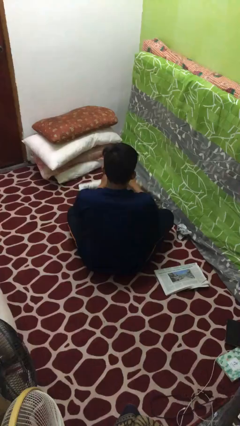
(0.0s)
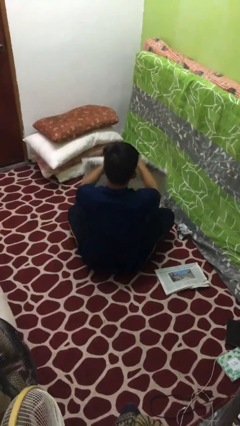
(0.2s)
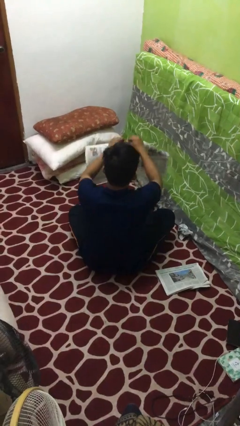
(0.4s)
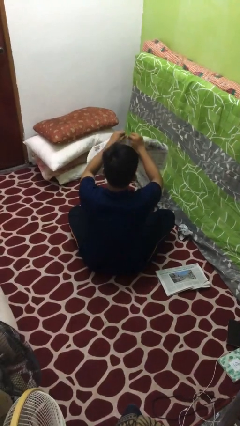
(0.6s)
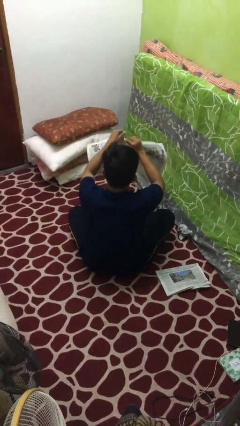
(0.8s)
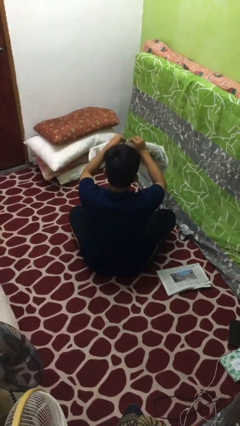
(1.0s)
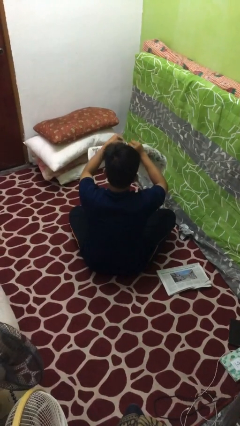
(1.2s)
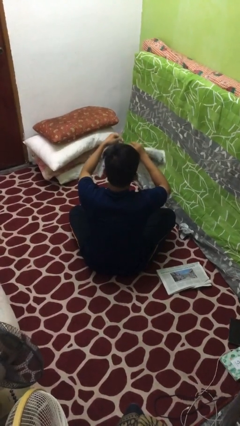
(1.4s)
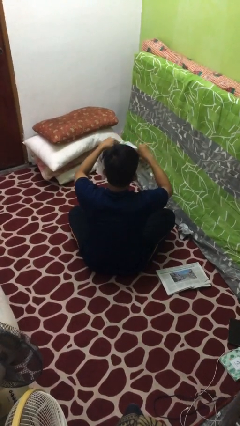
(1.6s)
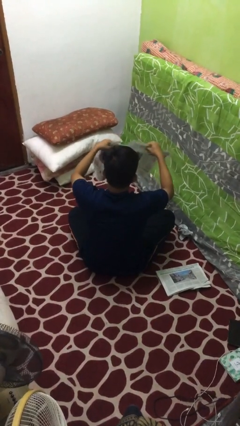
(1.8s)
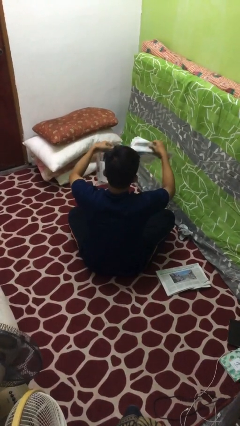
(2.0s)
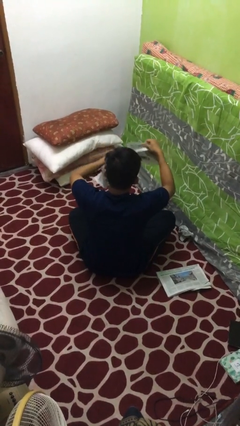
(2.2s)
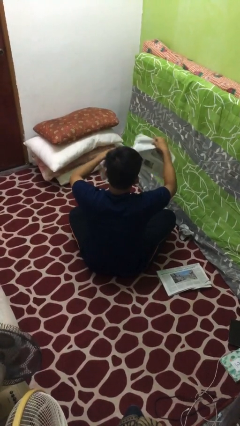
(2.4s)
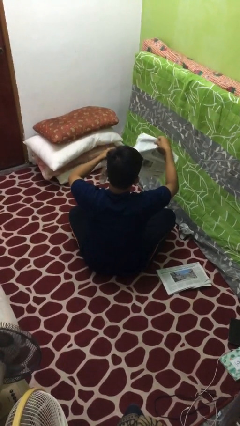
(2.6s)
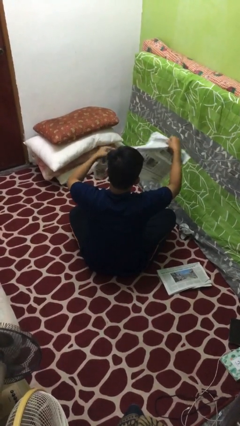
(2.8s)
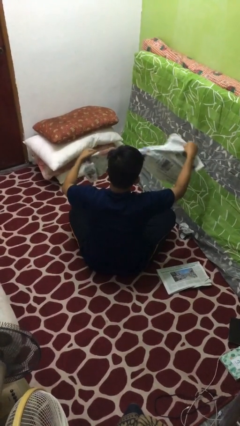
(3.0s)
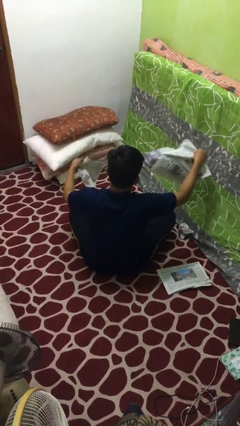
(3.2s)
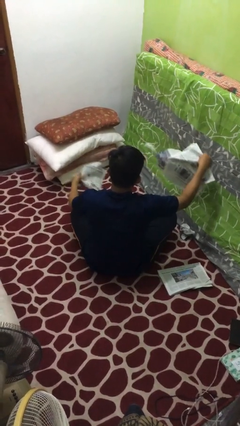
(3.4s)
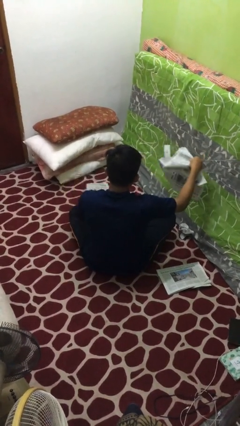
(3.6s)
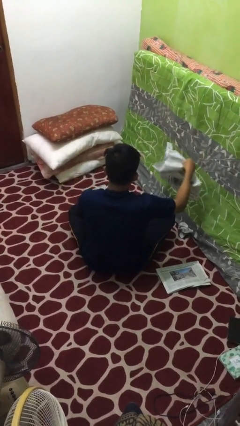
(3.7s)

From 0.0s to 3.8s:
person tears paper

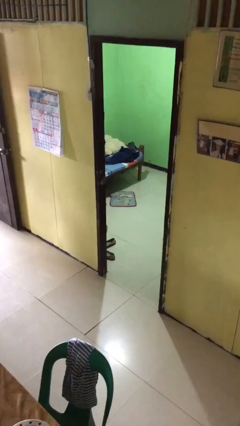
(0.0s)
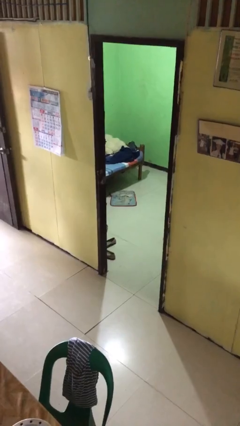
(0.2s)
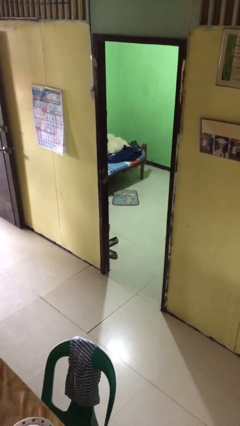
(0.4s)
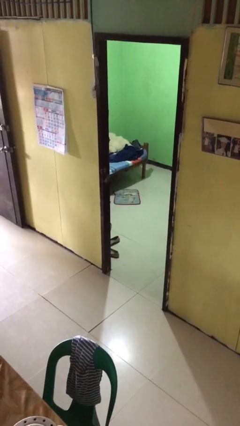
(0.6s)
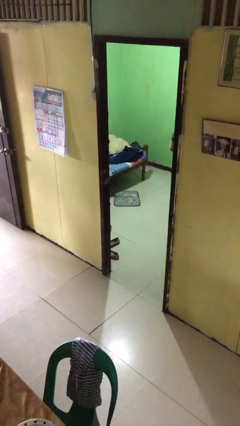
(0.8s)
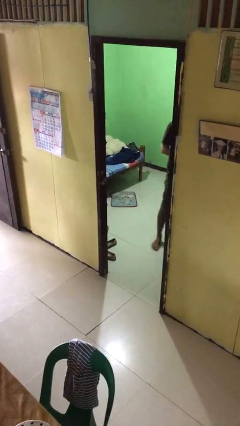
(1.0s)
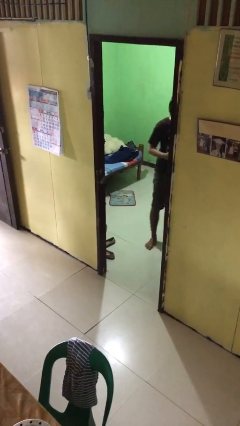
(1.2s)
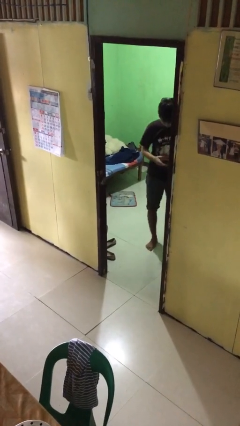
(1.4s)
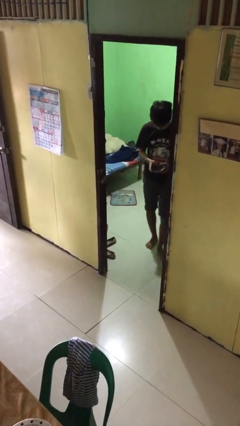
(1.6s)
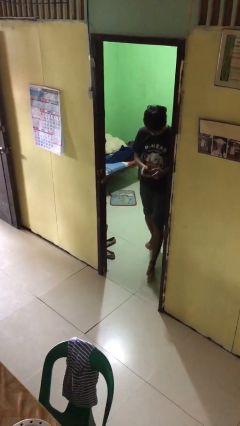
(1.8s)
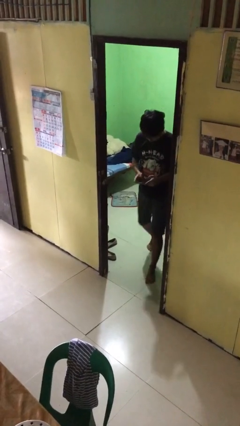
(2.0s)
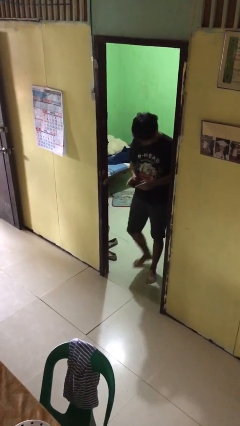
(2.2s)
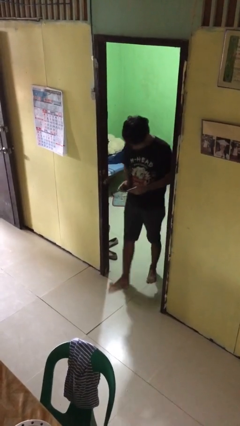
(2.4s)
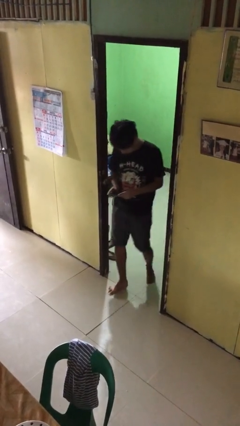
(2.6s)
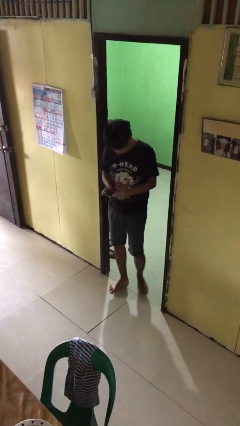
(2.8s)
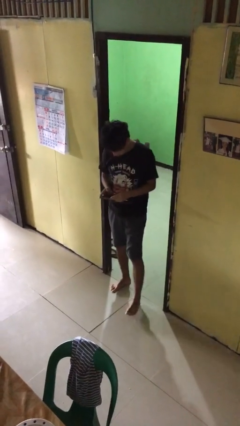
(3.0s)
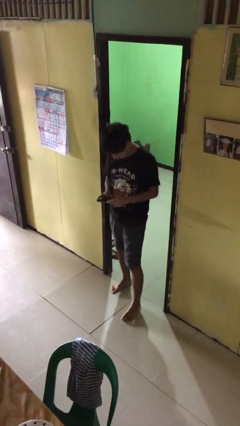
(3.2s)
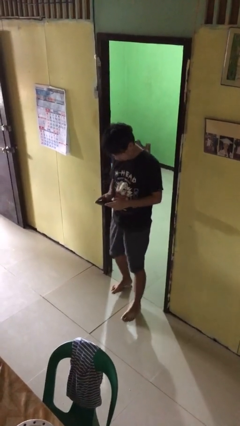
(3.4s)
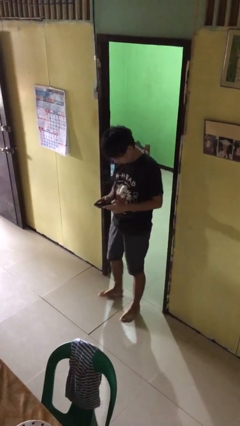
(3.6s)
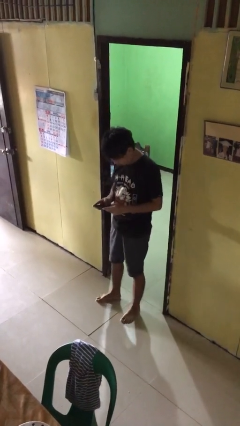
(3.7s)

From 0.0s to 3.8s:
person enters scene through structure

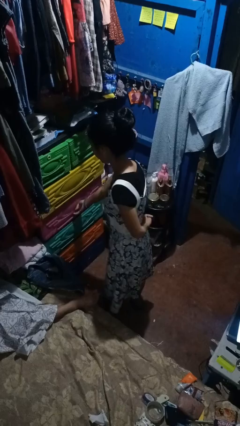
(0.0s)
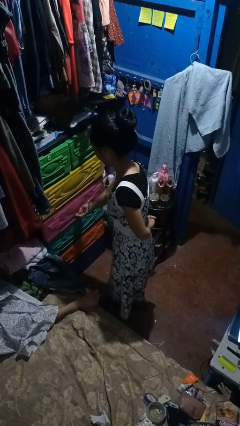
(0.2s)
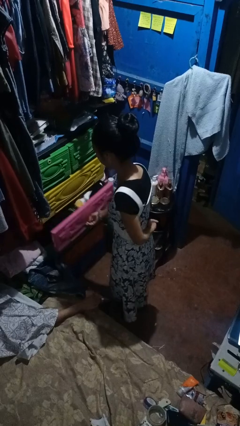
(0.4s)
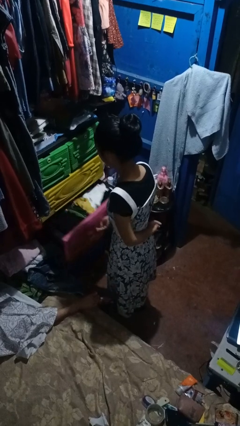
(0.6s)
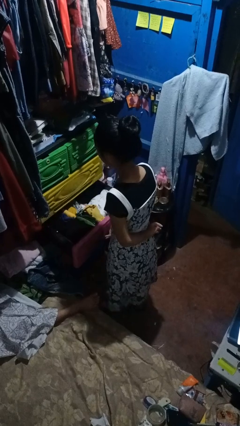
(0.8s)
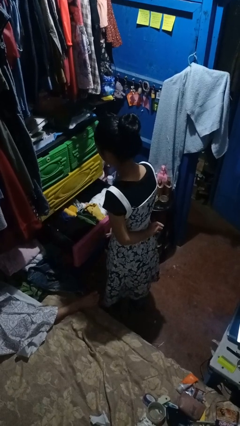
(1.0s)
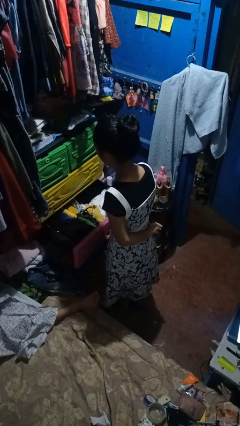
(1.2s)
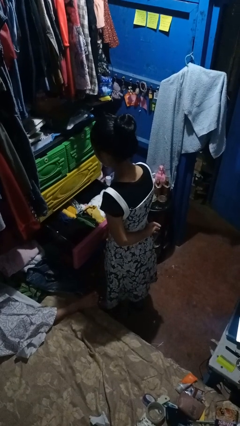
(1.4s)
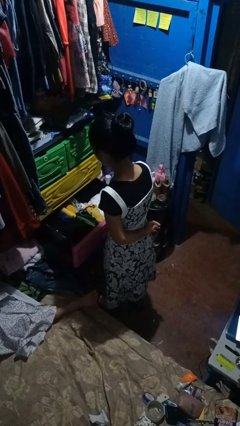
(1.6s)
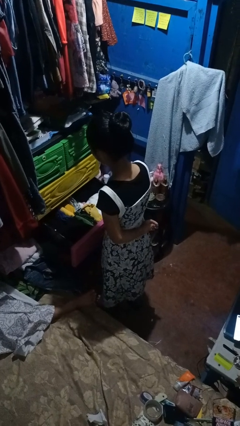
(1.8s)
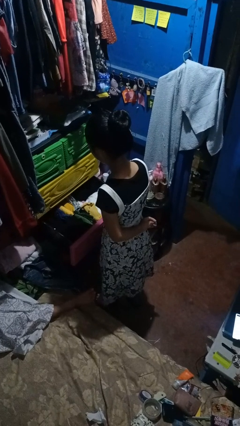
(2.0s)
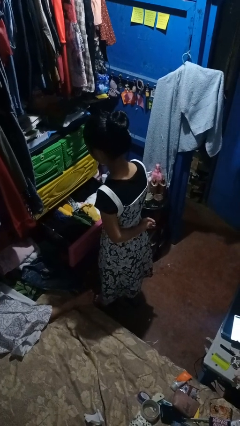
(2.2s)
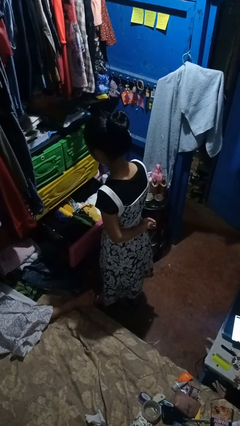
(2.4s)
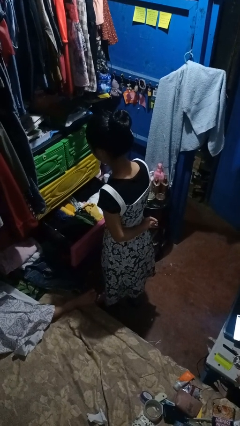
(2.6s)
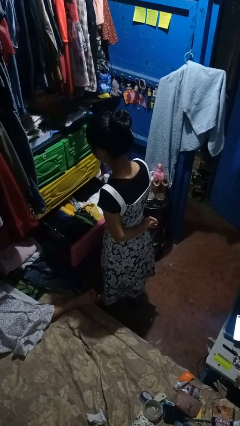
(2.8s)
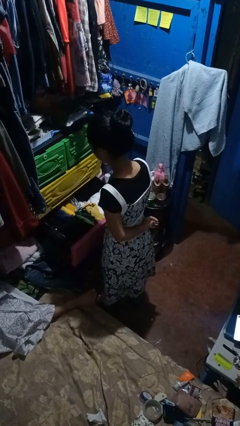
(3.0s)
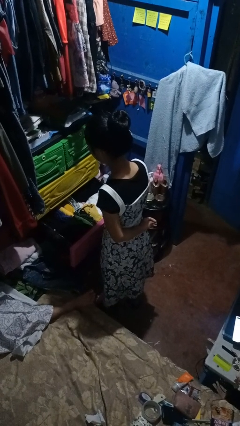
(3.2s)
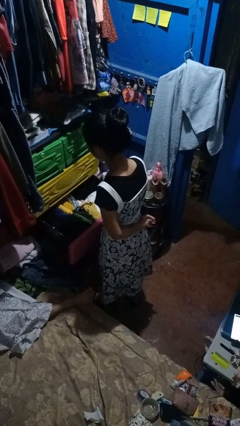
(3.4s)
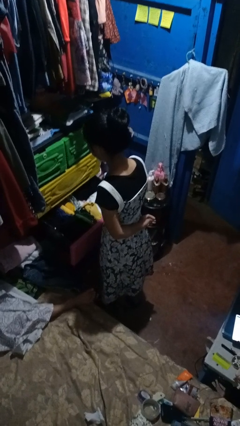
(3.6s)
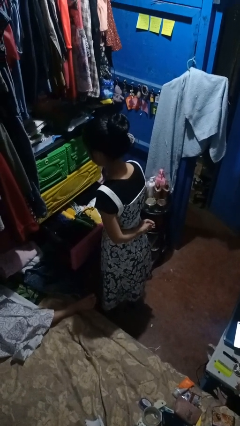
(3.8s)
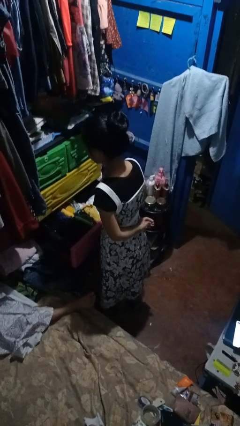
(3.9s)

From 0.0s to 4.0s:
person opens dresser drawer

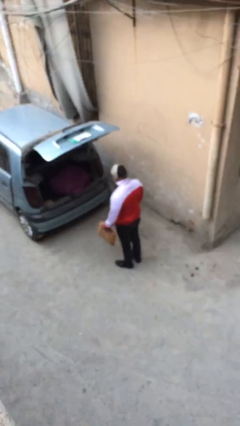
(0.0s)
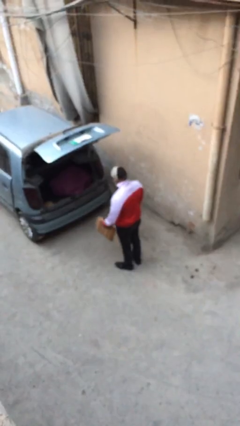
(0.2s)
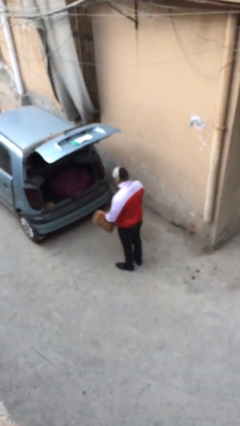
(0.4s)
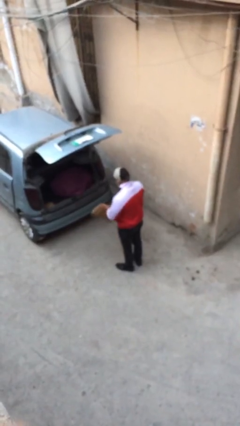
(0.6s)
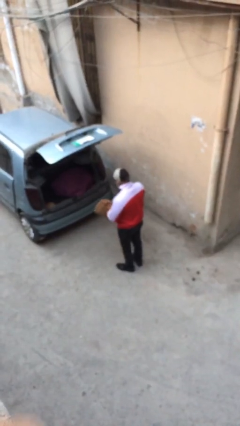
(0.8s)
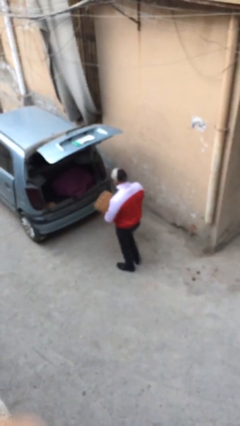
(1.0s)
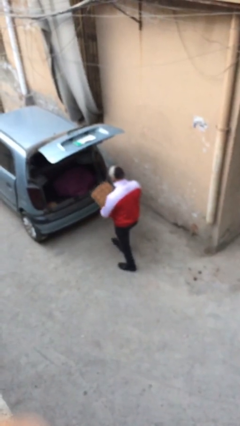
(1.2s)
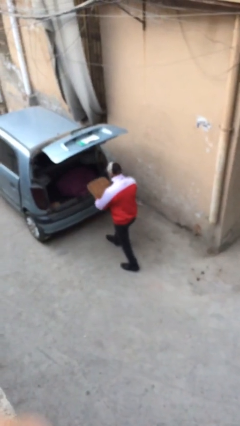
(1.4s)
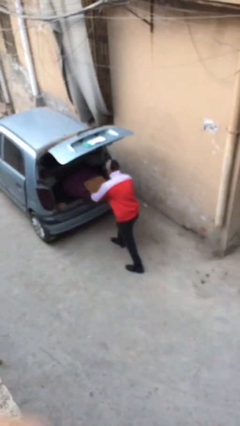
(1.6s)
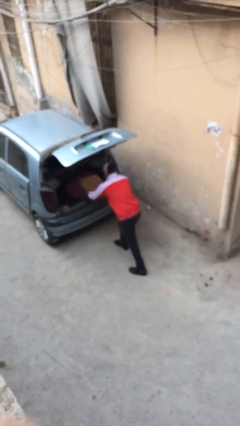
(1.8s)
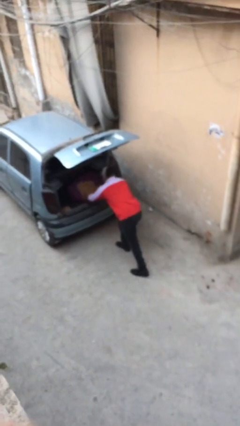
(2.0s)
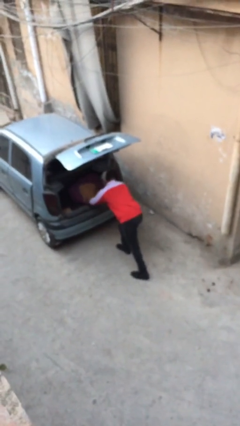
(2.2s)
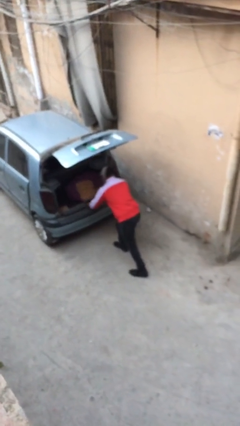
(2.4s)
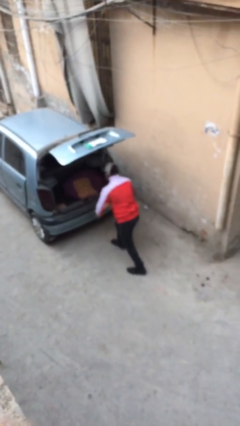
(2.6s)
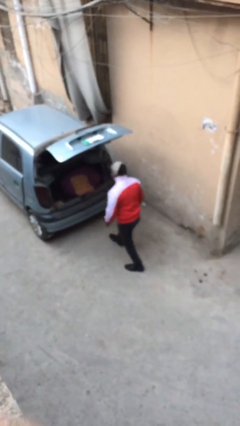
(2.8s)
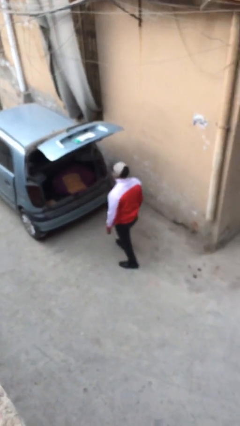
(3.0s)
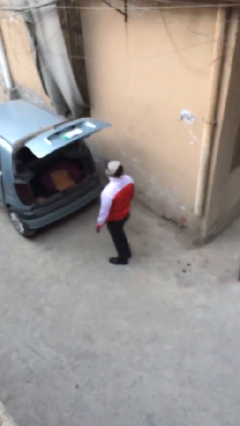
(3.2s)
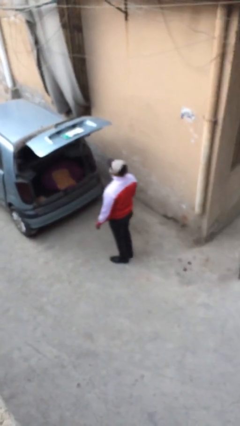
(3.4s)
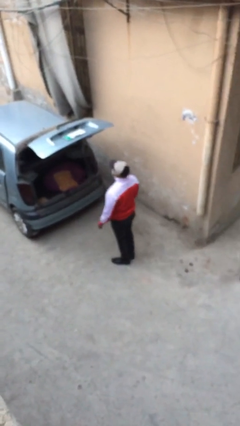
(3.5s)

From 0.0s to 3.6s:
person loads car

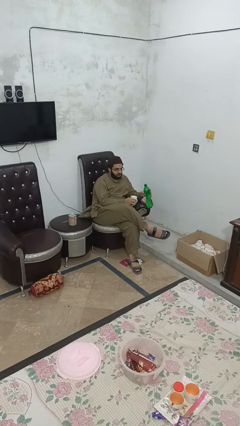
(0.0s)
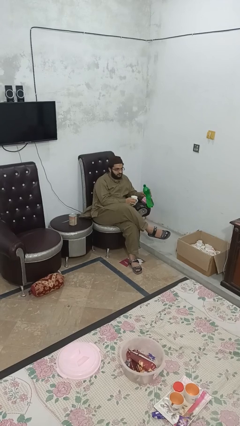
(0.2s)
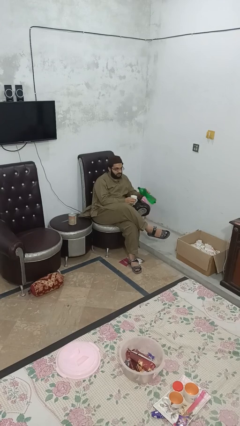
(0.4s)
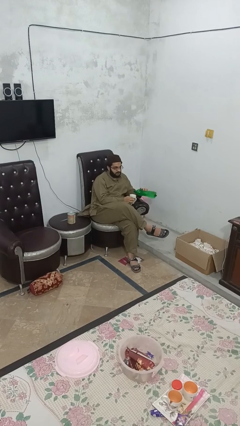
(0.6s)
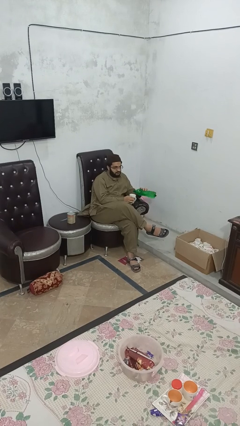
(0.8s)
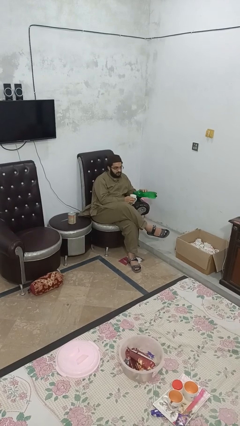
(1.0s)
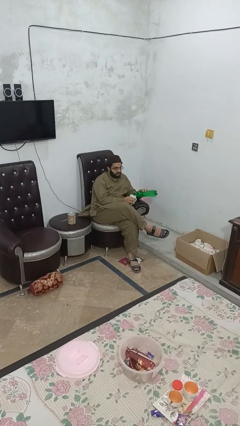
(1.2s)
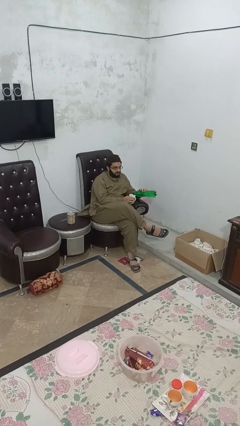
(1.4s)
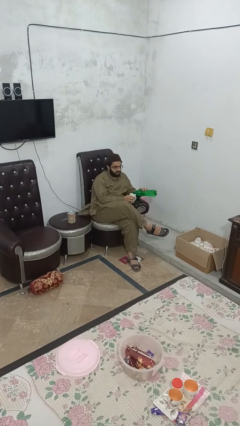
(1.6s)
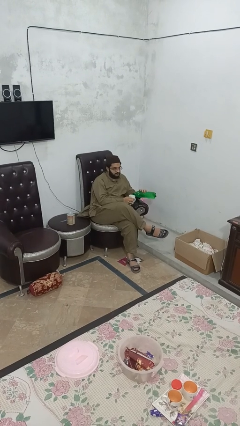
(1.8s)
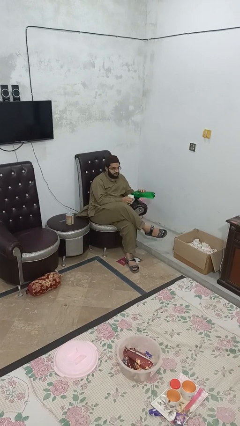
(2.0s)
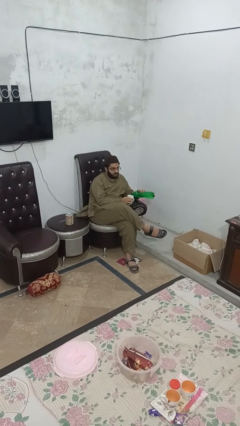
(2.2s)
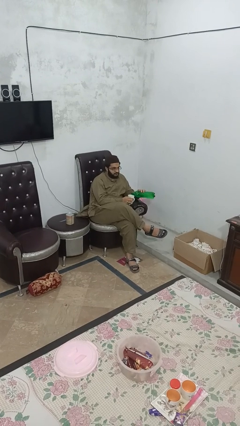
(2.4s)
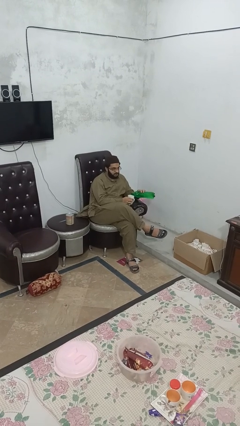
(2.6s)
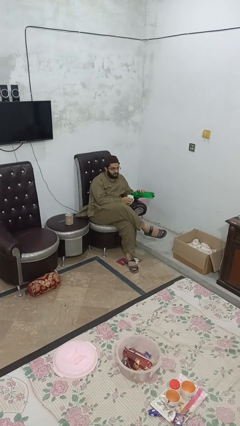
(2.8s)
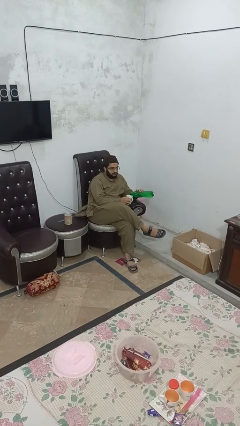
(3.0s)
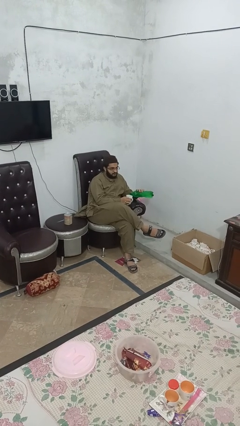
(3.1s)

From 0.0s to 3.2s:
person pours liquid into cup
